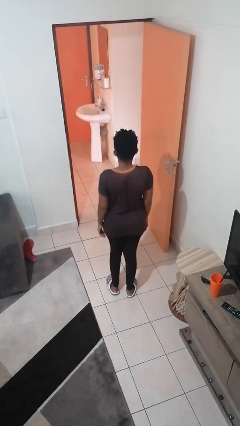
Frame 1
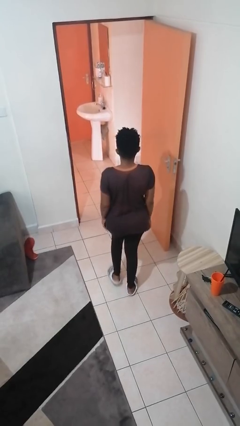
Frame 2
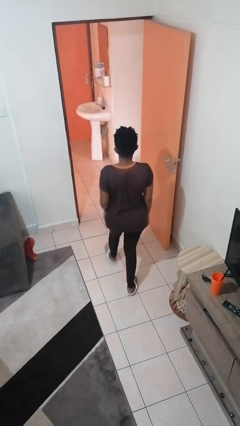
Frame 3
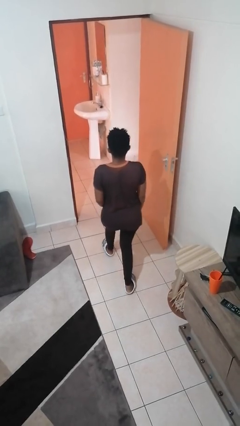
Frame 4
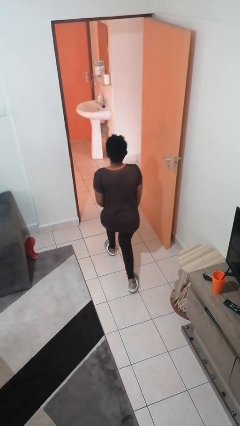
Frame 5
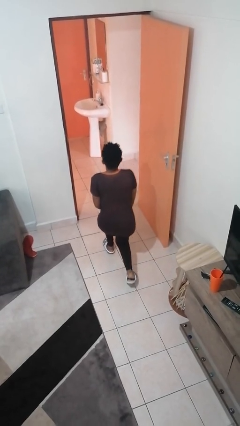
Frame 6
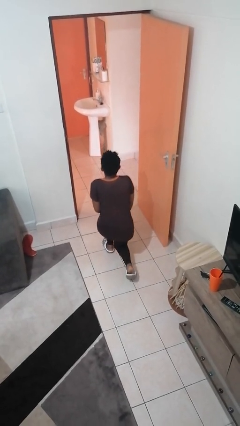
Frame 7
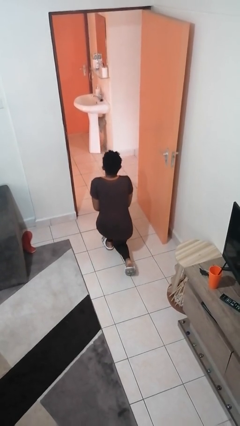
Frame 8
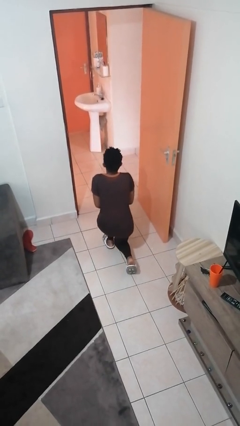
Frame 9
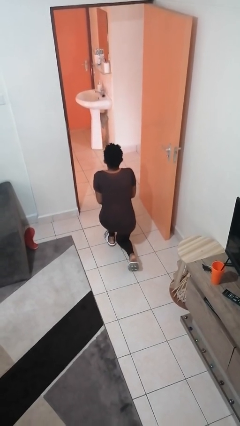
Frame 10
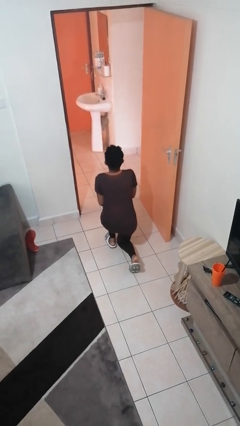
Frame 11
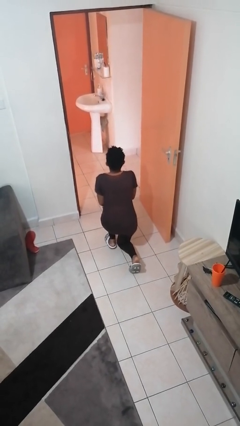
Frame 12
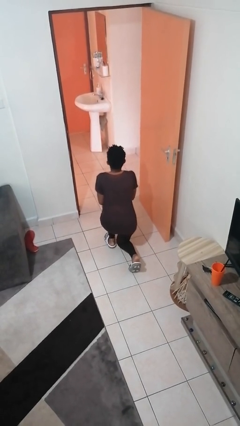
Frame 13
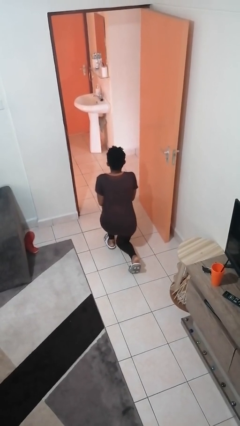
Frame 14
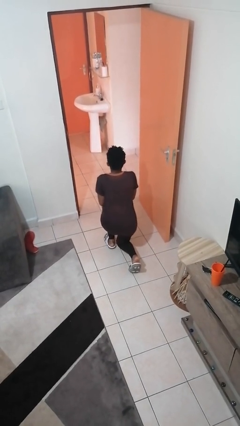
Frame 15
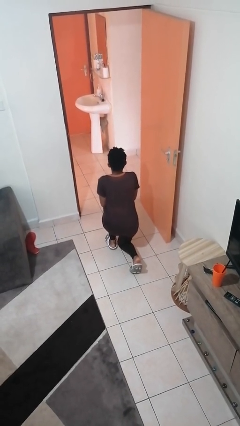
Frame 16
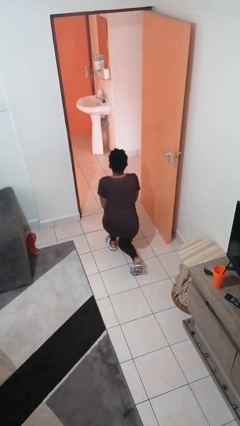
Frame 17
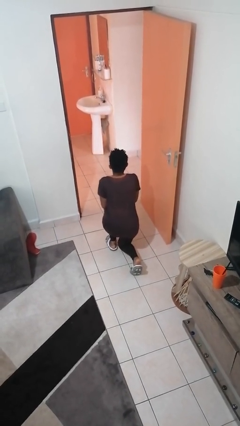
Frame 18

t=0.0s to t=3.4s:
person kneels

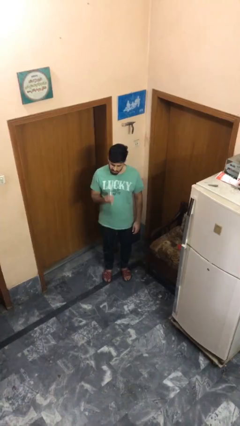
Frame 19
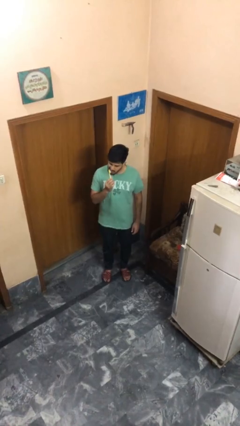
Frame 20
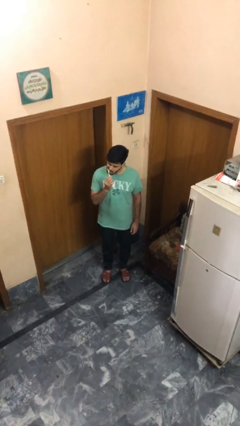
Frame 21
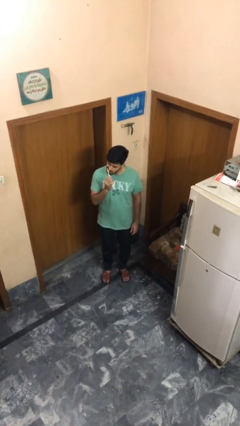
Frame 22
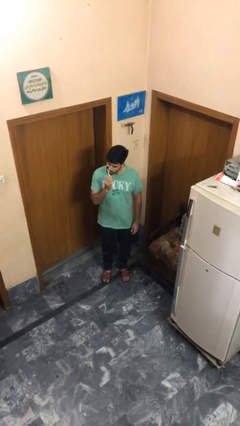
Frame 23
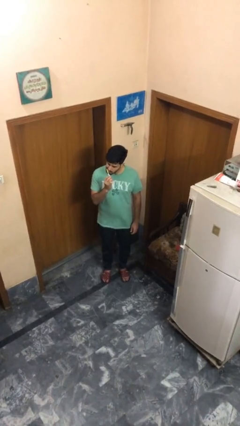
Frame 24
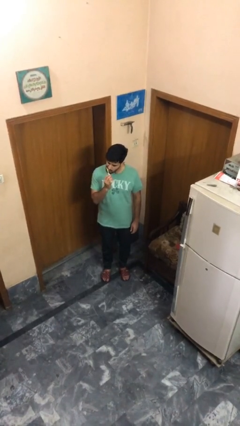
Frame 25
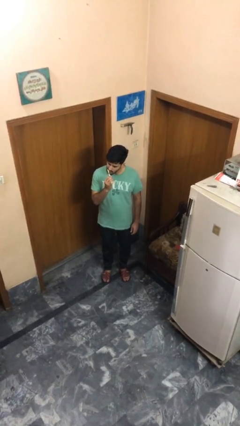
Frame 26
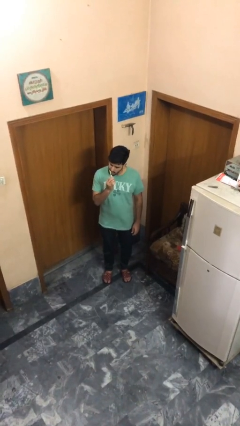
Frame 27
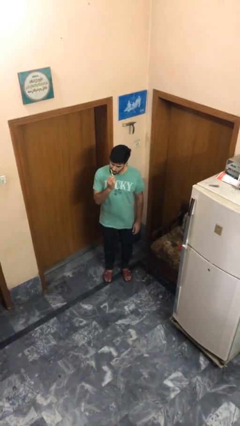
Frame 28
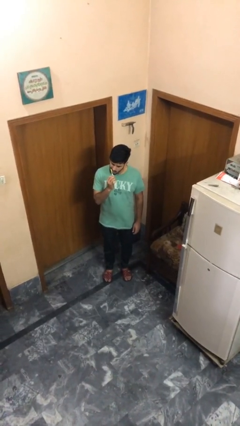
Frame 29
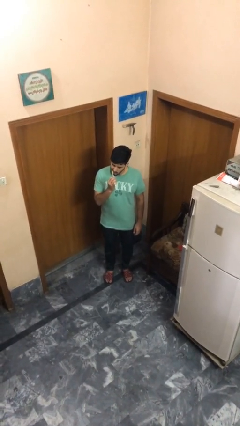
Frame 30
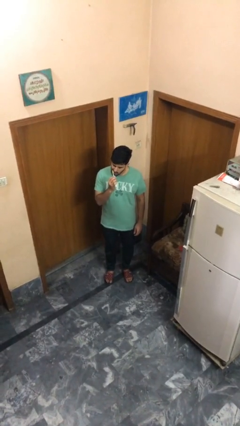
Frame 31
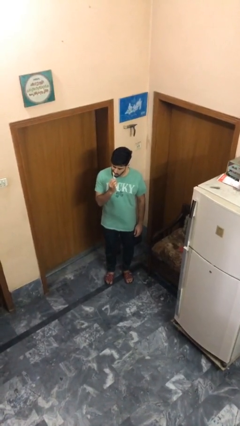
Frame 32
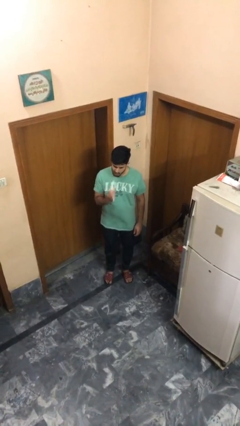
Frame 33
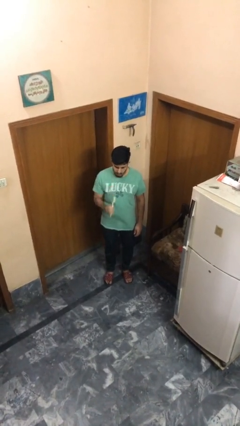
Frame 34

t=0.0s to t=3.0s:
person brushes teeth

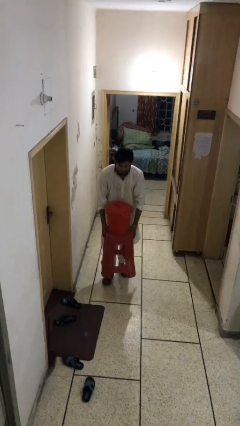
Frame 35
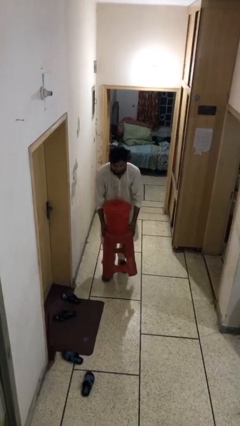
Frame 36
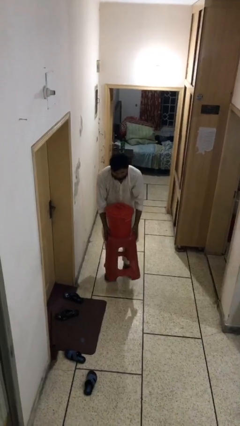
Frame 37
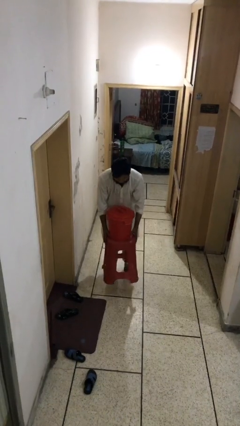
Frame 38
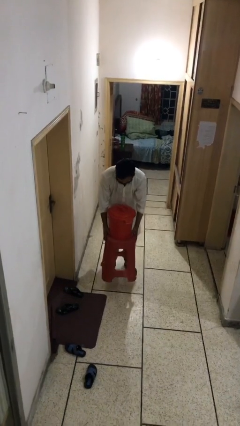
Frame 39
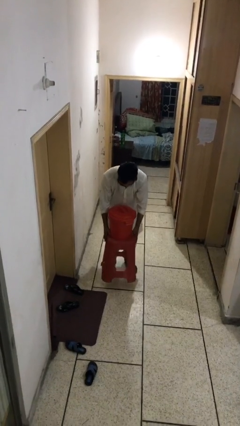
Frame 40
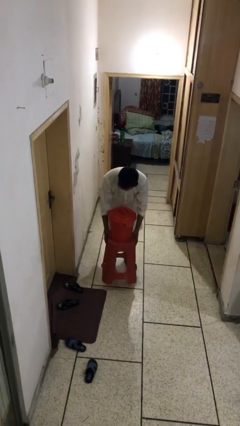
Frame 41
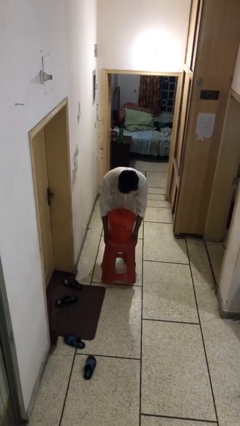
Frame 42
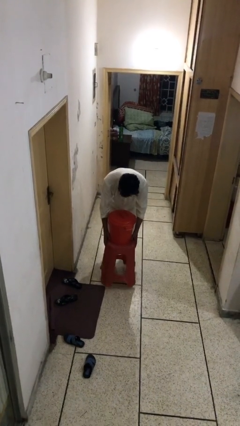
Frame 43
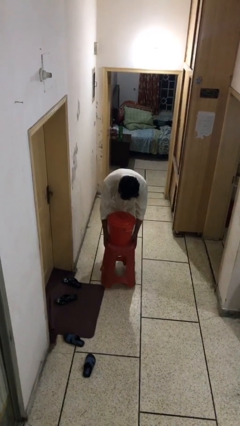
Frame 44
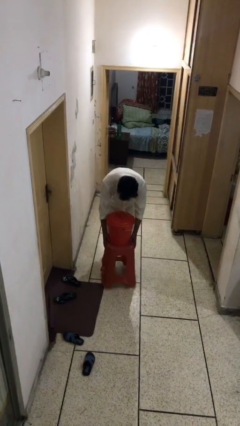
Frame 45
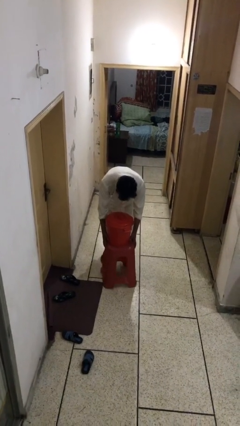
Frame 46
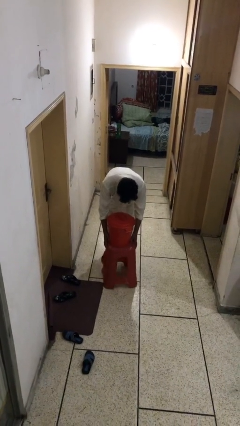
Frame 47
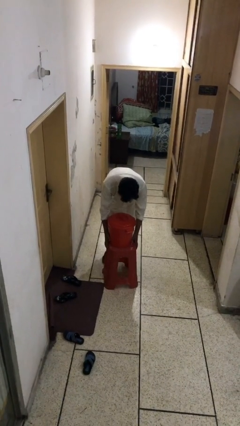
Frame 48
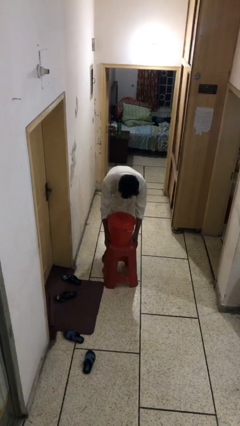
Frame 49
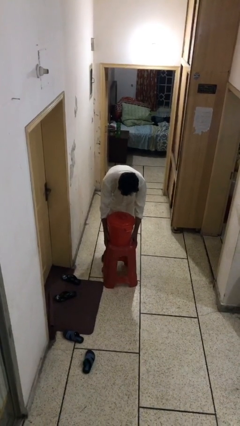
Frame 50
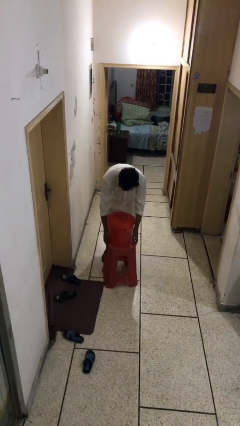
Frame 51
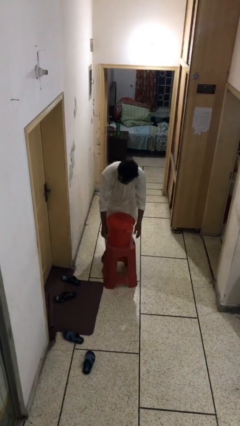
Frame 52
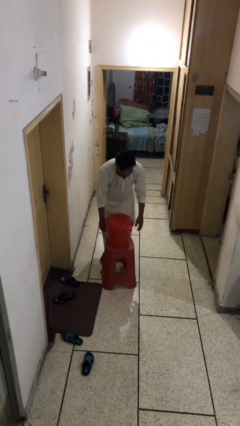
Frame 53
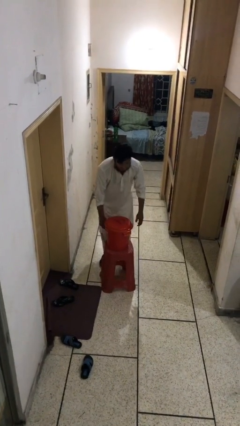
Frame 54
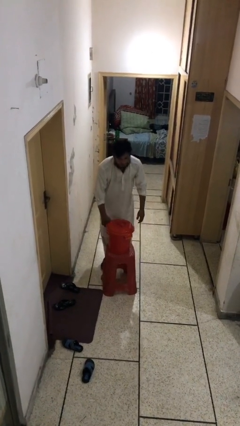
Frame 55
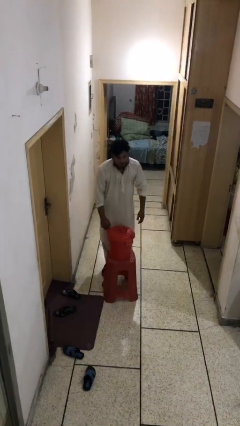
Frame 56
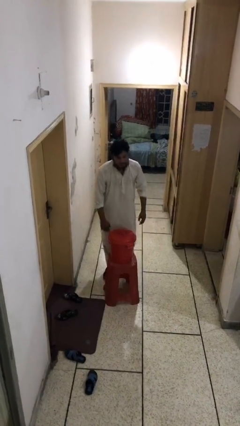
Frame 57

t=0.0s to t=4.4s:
person puts down object on floor

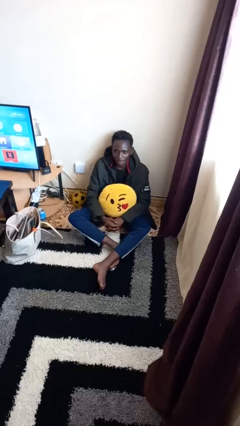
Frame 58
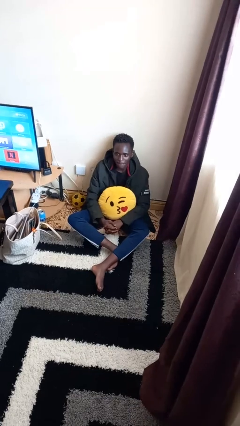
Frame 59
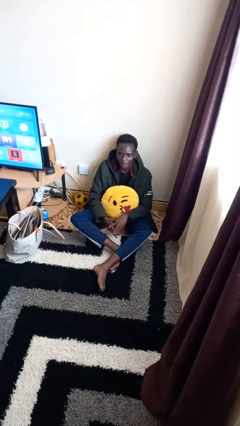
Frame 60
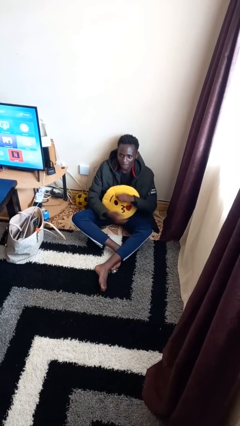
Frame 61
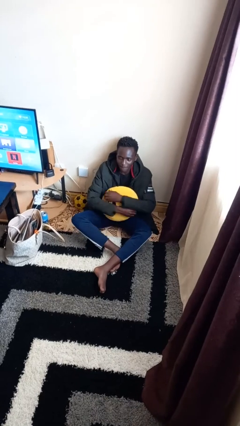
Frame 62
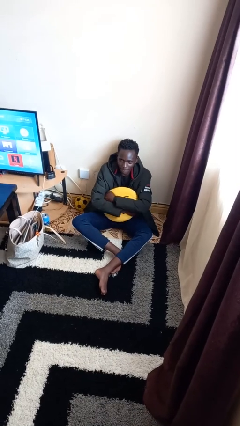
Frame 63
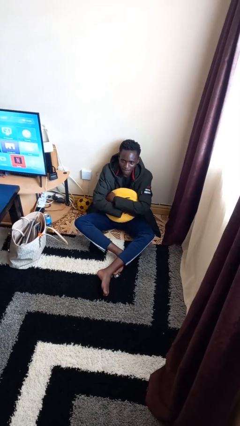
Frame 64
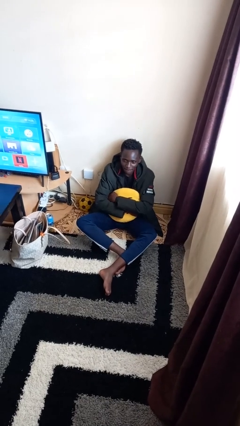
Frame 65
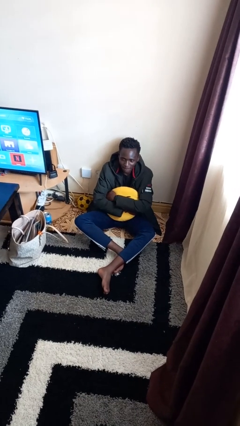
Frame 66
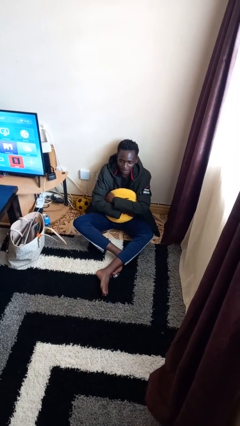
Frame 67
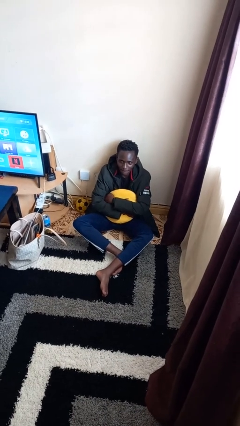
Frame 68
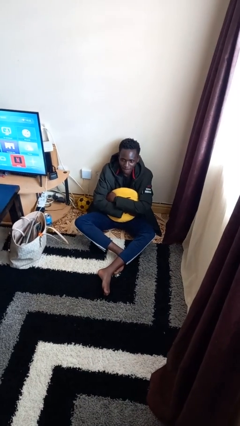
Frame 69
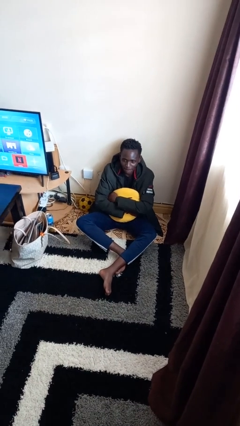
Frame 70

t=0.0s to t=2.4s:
person hugs stuffed animal

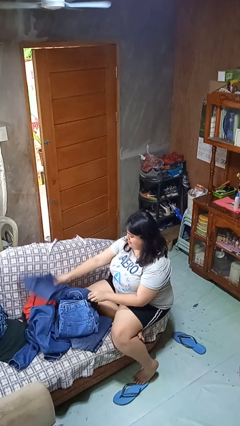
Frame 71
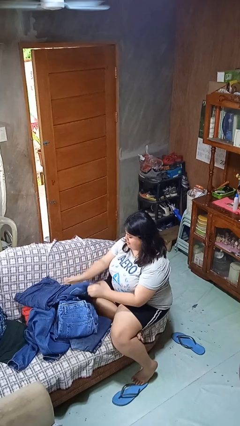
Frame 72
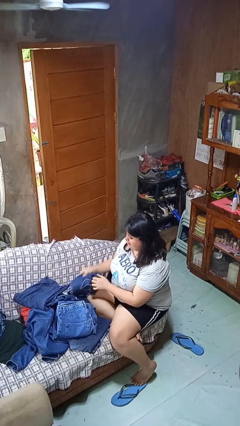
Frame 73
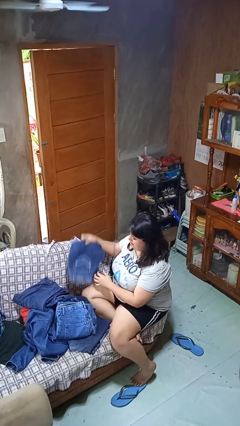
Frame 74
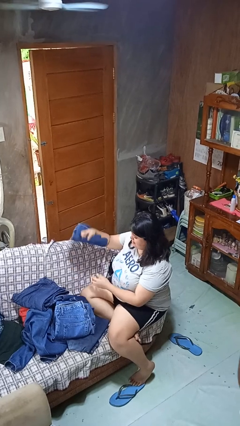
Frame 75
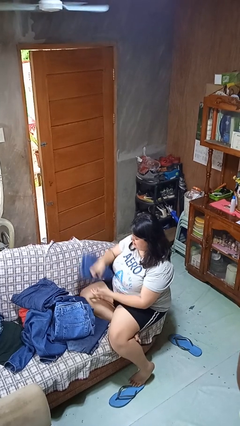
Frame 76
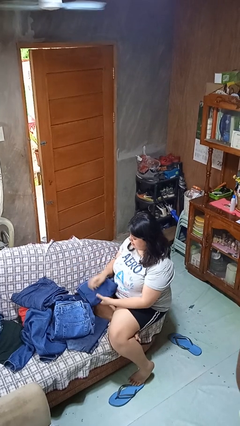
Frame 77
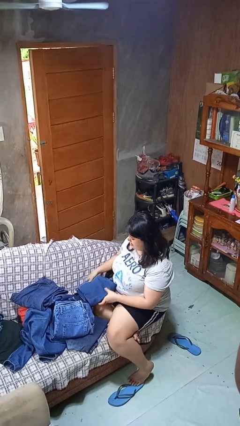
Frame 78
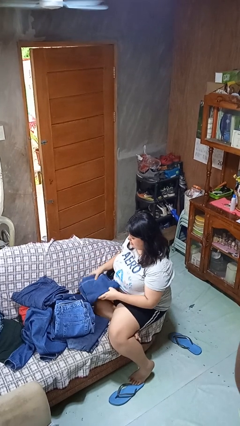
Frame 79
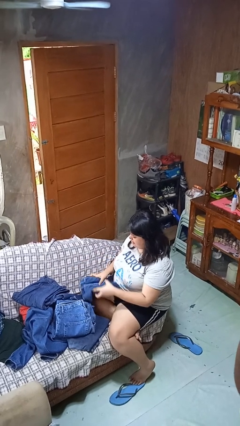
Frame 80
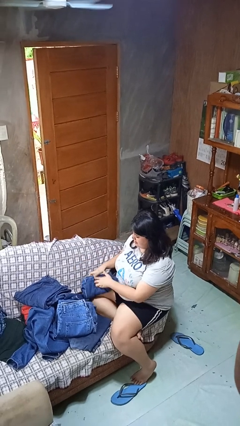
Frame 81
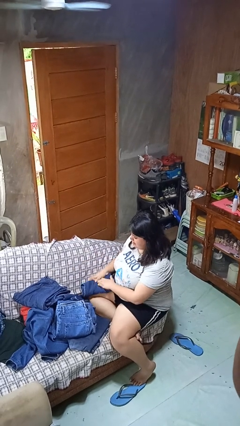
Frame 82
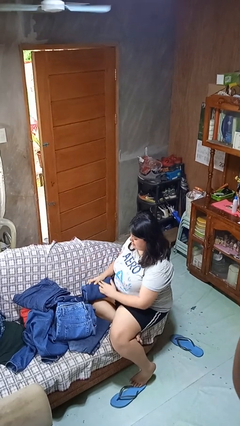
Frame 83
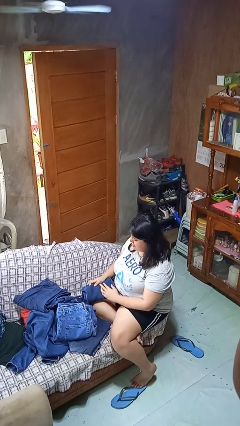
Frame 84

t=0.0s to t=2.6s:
person folds pants

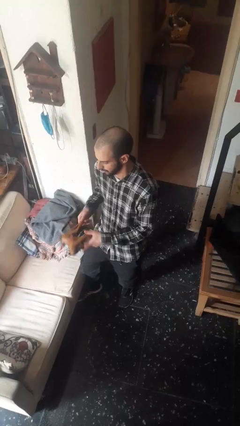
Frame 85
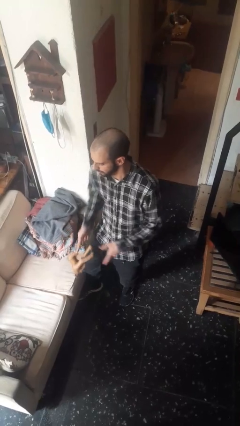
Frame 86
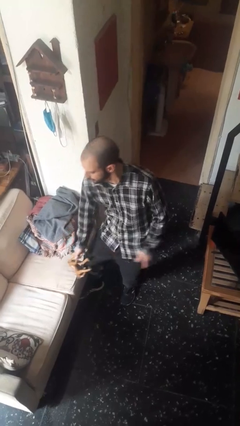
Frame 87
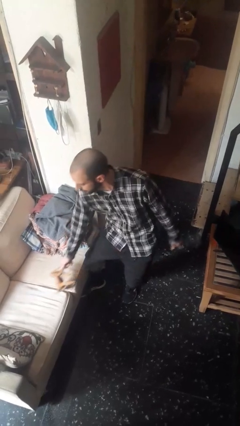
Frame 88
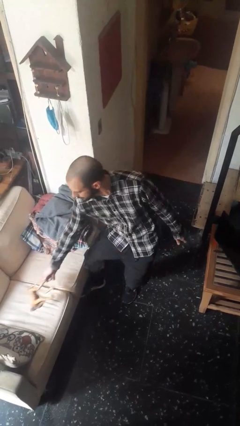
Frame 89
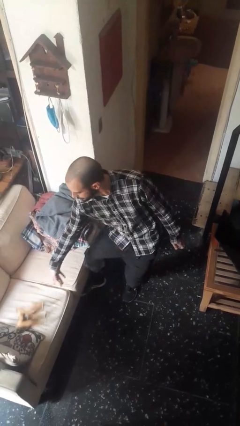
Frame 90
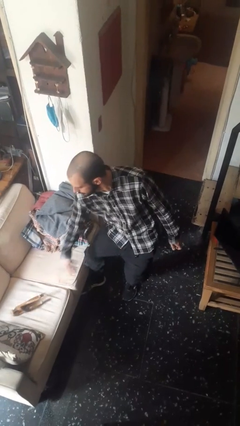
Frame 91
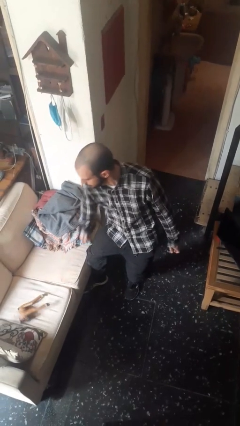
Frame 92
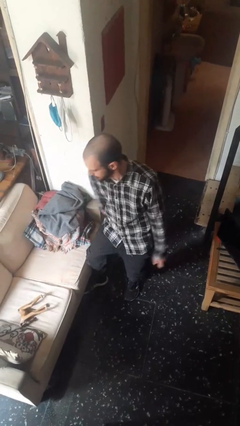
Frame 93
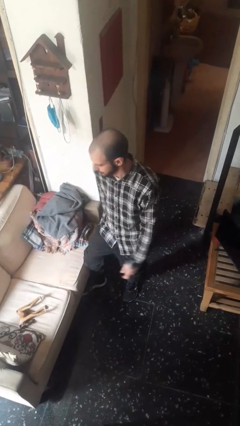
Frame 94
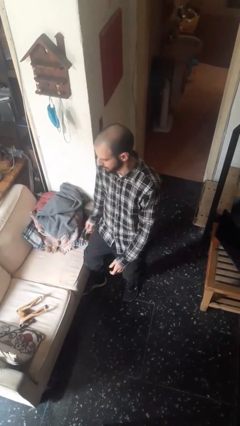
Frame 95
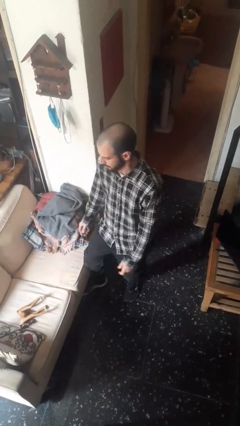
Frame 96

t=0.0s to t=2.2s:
person puts down object on couch
